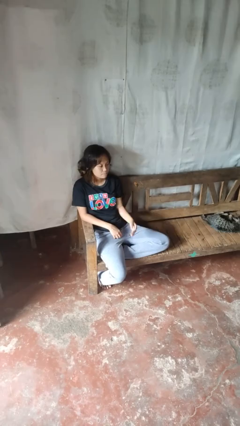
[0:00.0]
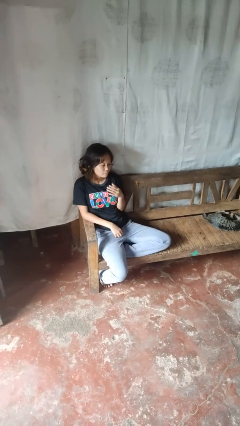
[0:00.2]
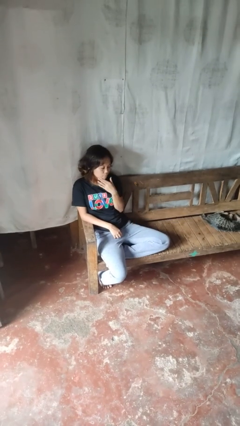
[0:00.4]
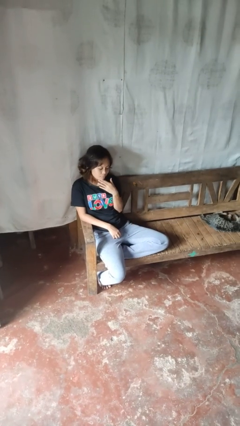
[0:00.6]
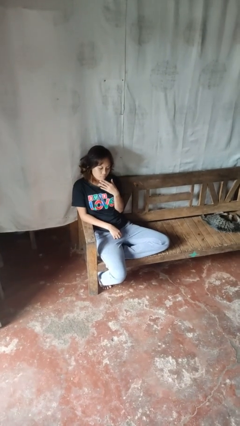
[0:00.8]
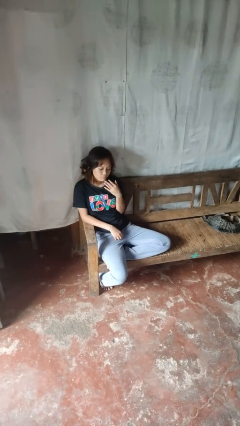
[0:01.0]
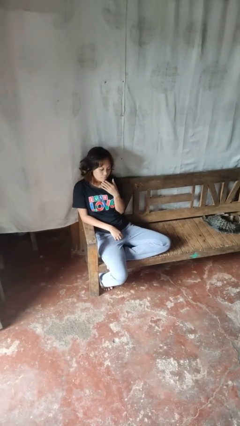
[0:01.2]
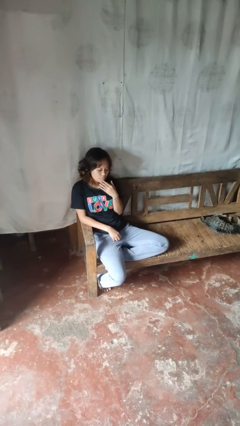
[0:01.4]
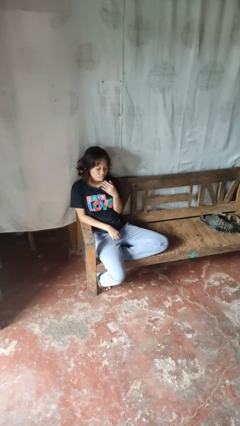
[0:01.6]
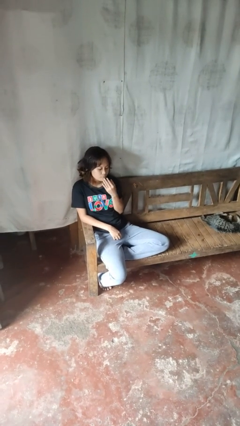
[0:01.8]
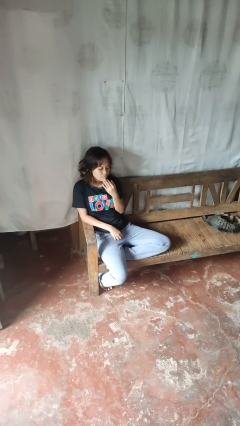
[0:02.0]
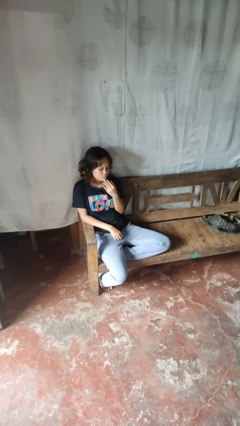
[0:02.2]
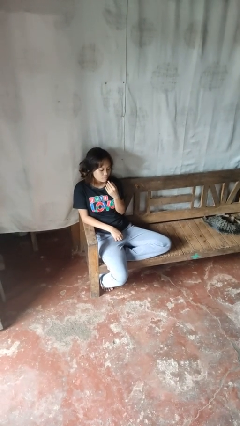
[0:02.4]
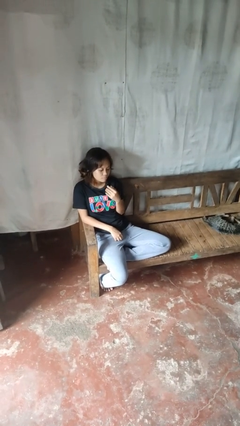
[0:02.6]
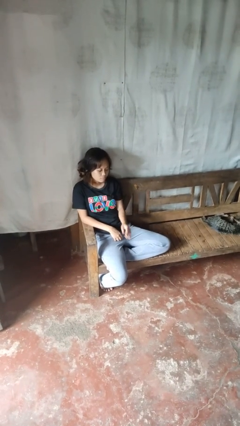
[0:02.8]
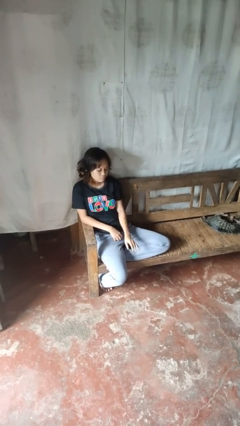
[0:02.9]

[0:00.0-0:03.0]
person strokes chin

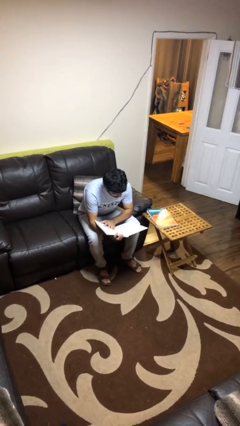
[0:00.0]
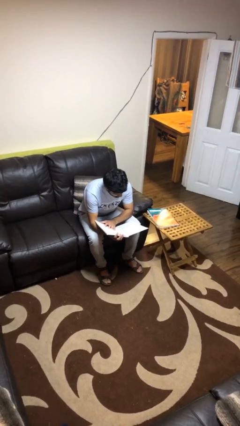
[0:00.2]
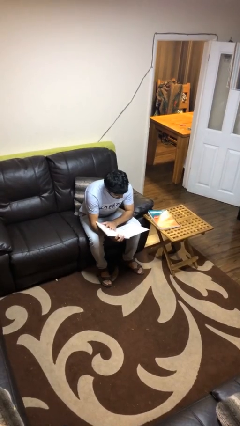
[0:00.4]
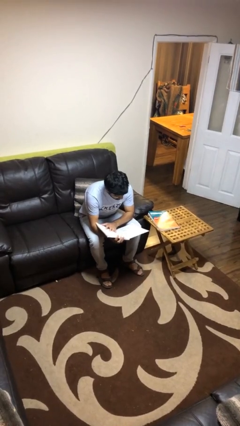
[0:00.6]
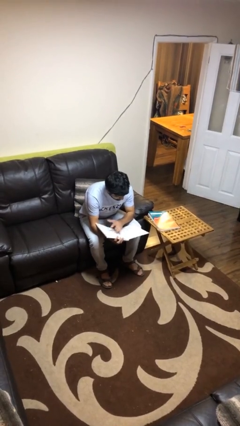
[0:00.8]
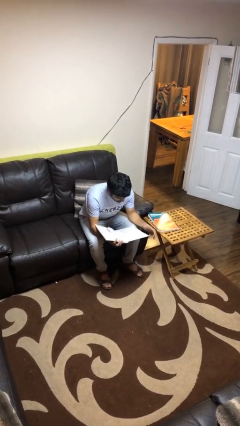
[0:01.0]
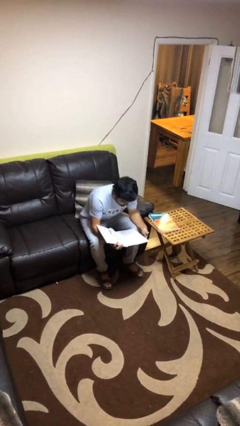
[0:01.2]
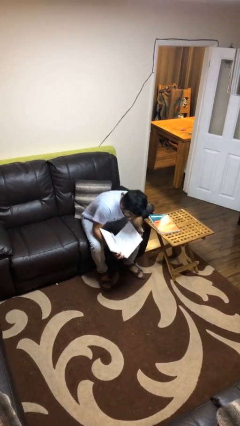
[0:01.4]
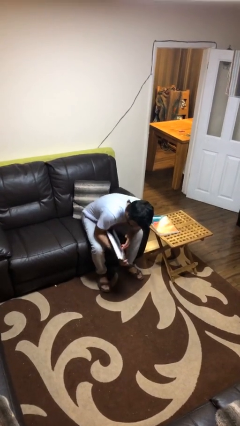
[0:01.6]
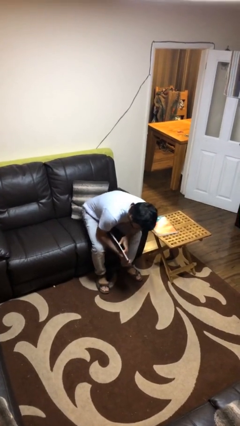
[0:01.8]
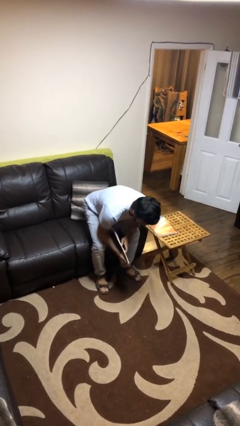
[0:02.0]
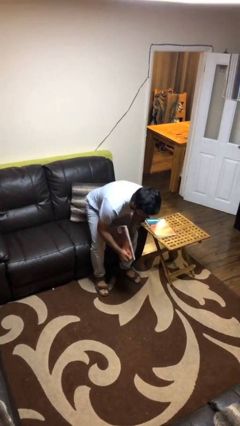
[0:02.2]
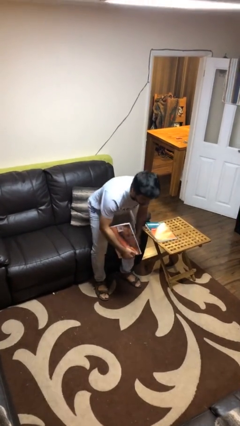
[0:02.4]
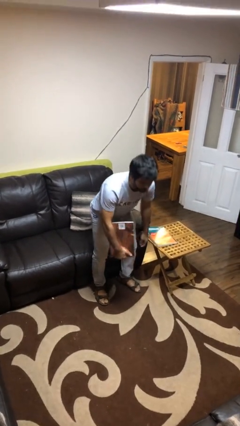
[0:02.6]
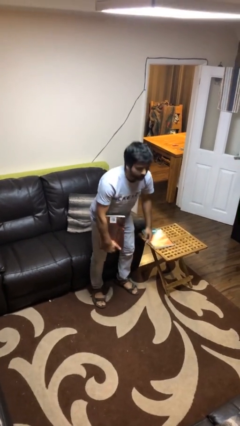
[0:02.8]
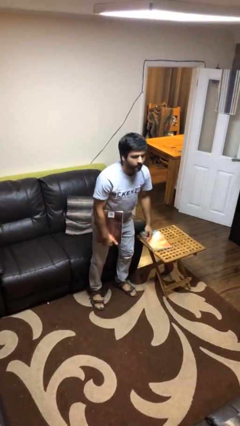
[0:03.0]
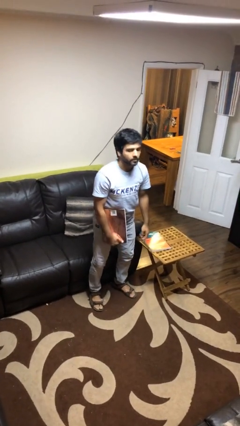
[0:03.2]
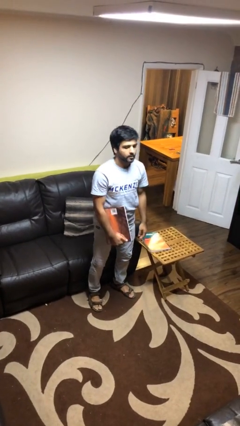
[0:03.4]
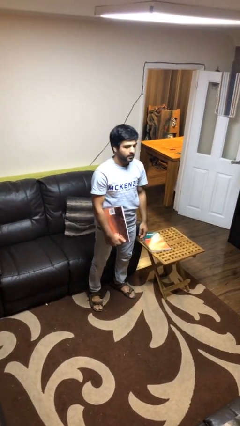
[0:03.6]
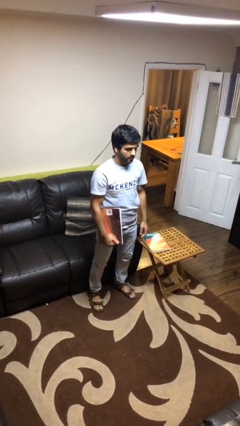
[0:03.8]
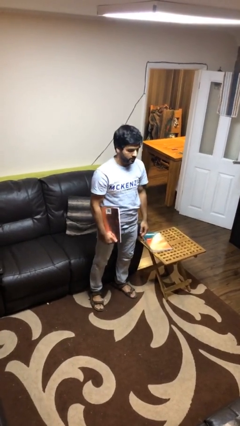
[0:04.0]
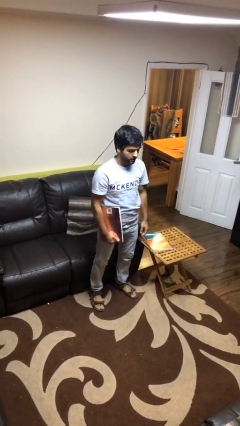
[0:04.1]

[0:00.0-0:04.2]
person stands up

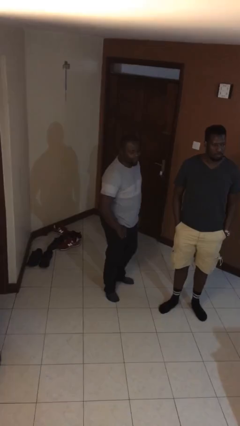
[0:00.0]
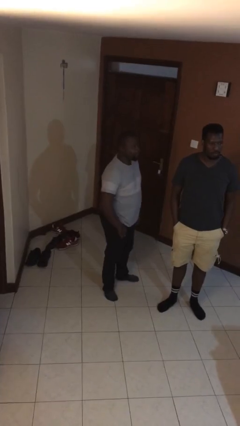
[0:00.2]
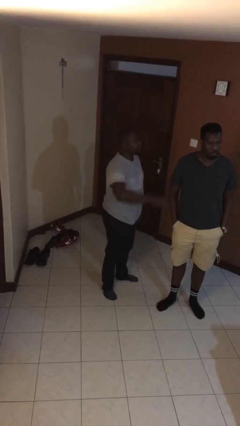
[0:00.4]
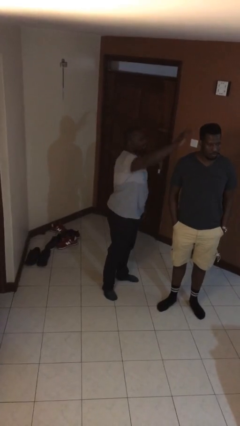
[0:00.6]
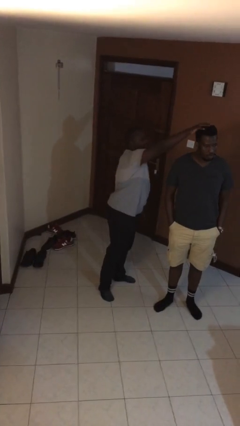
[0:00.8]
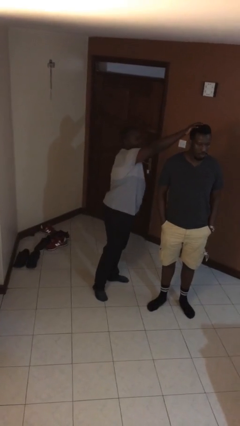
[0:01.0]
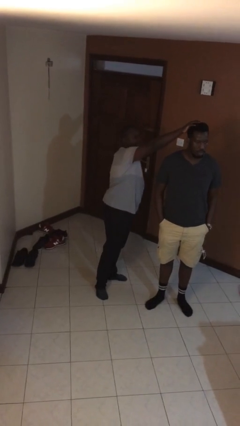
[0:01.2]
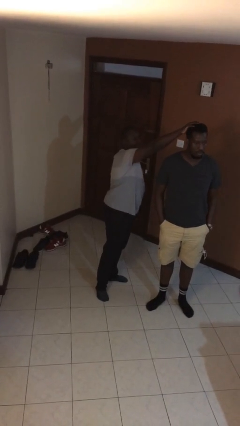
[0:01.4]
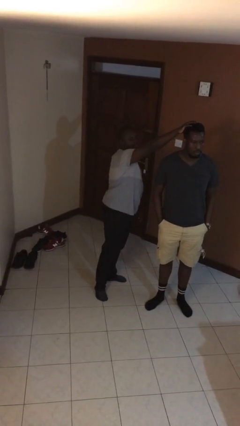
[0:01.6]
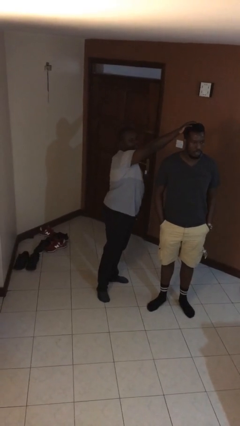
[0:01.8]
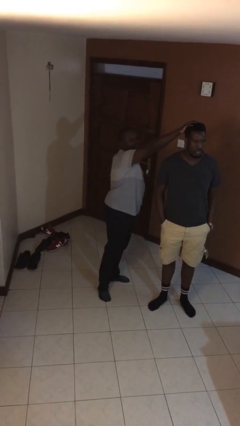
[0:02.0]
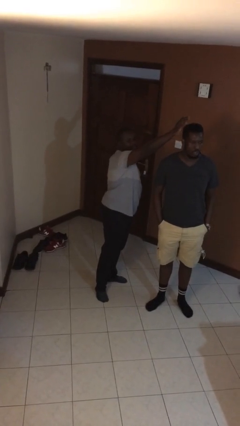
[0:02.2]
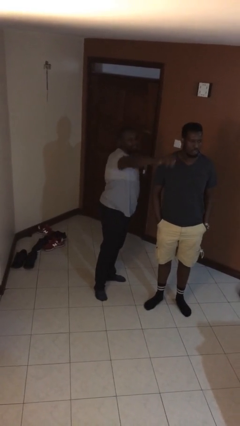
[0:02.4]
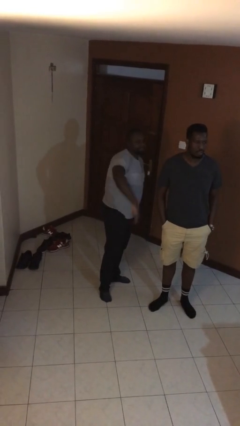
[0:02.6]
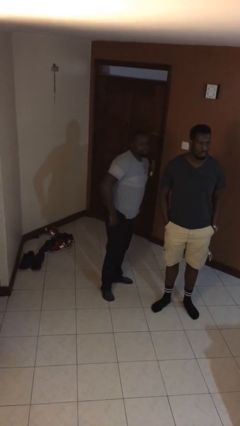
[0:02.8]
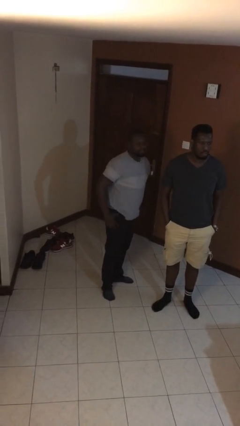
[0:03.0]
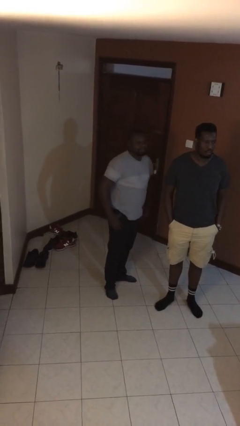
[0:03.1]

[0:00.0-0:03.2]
person grabs person by hair

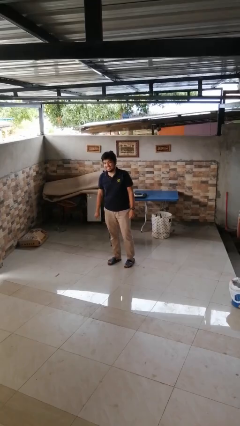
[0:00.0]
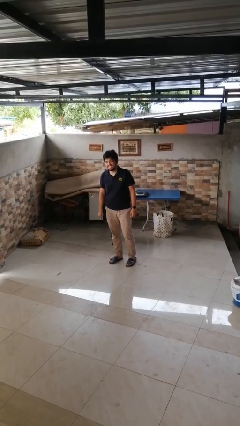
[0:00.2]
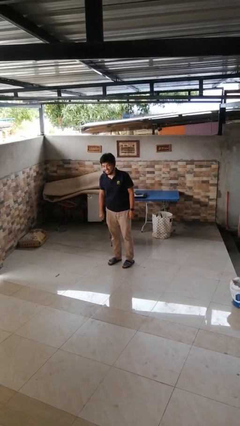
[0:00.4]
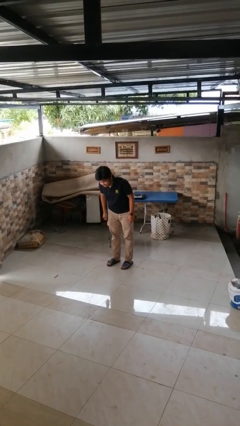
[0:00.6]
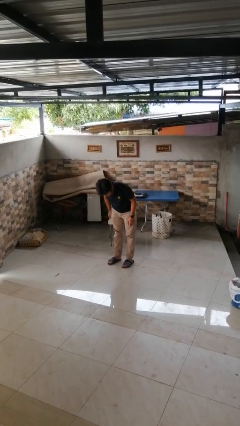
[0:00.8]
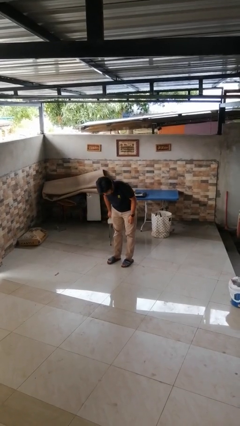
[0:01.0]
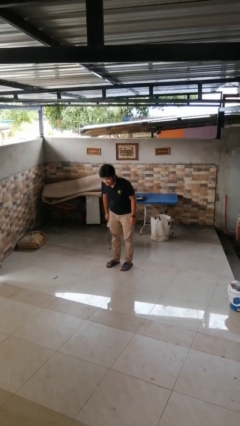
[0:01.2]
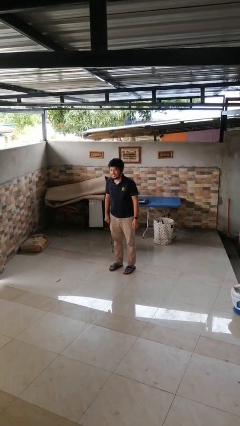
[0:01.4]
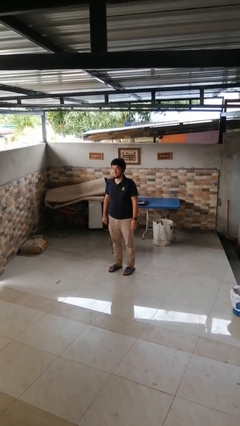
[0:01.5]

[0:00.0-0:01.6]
person bows

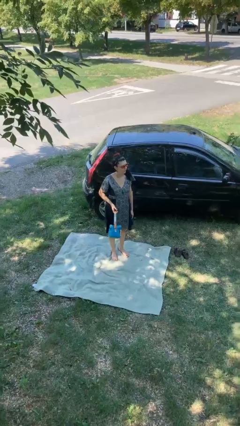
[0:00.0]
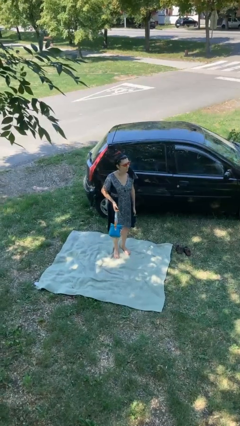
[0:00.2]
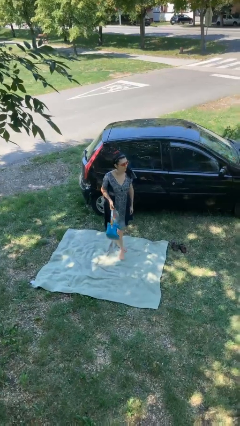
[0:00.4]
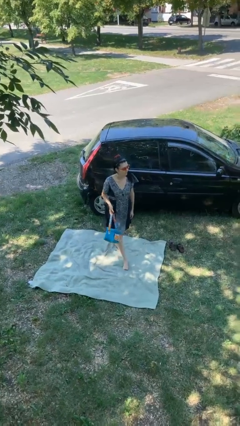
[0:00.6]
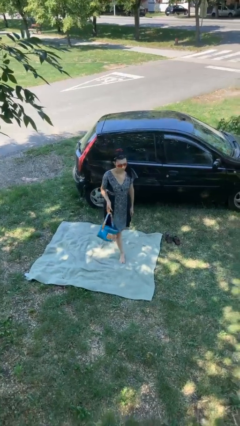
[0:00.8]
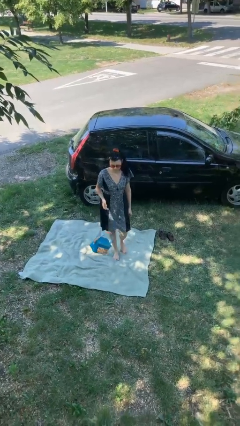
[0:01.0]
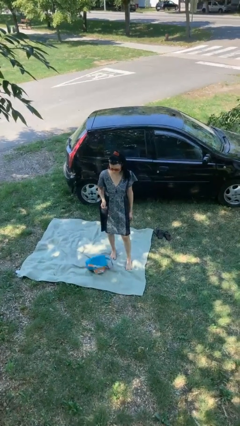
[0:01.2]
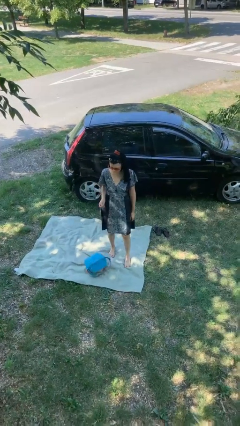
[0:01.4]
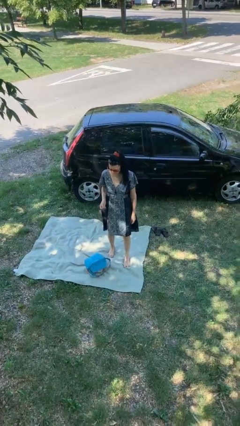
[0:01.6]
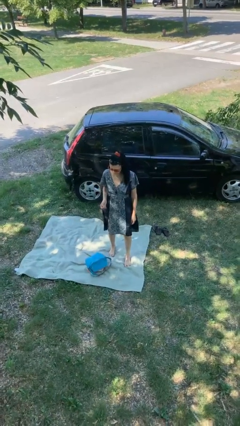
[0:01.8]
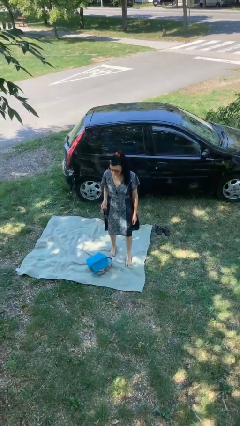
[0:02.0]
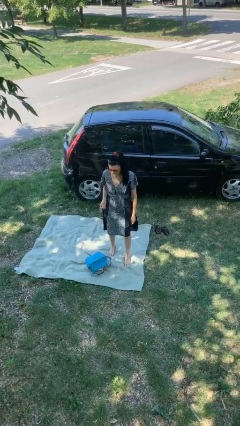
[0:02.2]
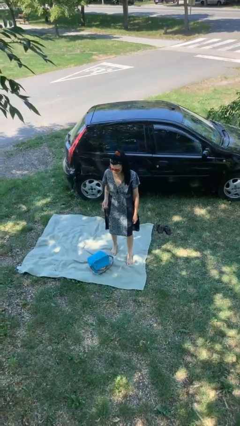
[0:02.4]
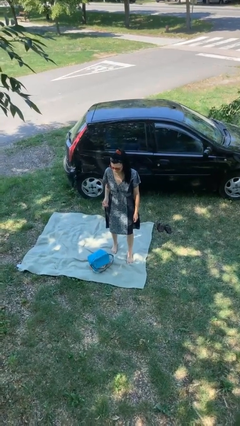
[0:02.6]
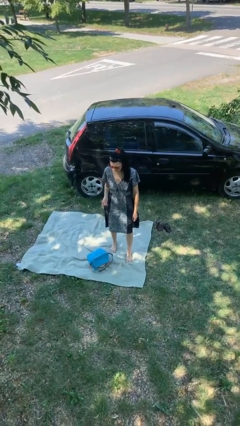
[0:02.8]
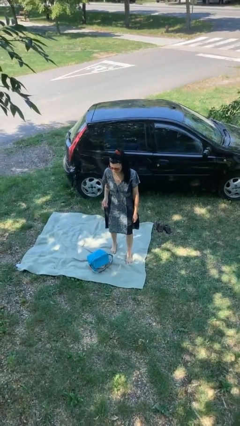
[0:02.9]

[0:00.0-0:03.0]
person drops object

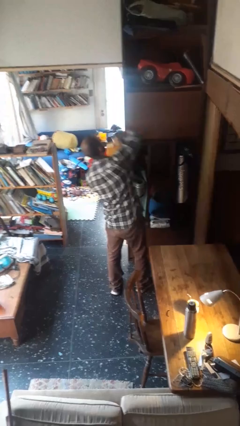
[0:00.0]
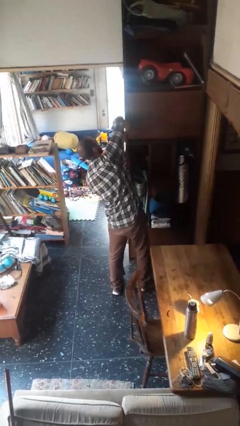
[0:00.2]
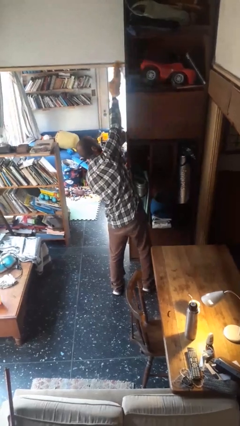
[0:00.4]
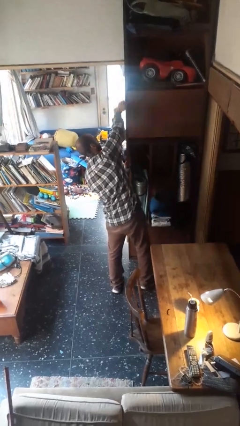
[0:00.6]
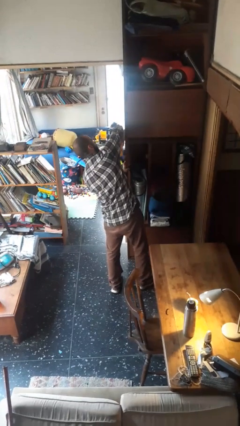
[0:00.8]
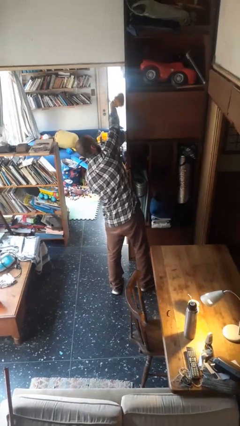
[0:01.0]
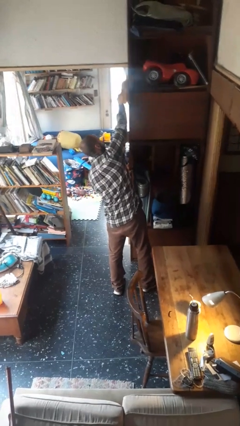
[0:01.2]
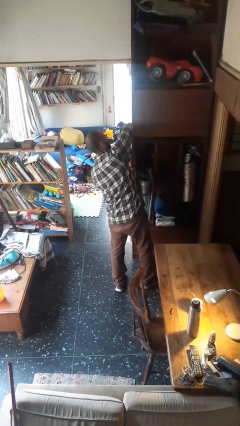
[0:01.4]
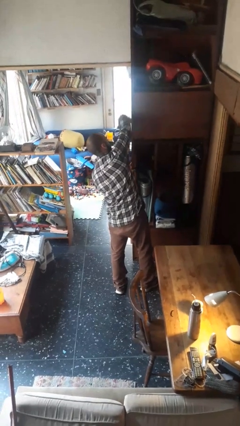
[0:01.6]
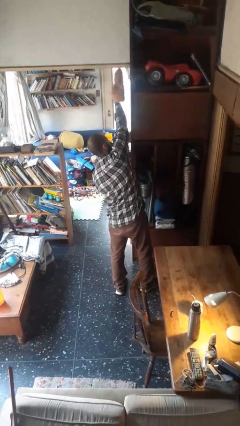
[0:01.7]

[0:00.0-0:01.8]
person dusts furniture

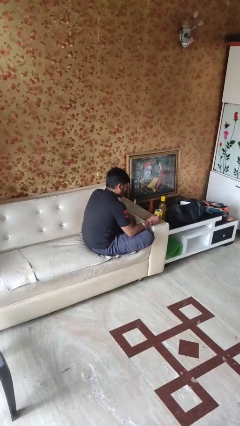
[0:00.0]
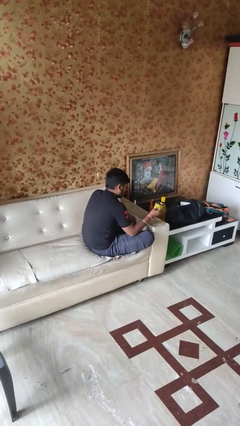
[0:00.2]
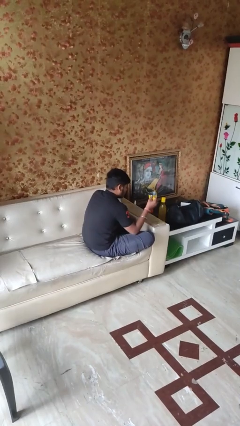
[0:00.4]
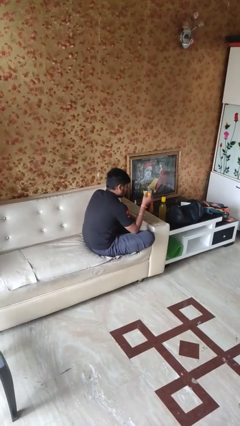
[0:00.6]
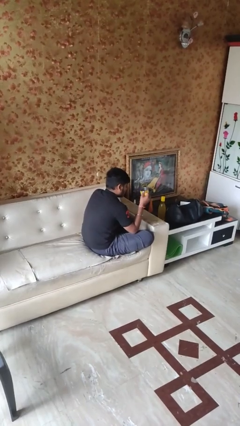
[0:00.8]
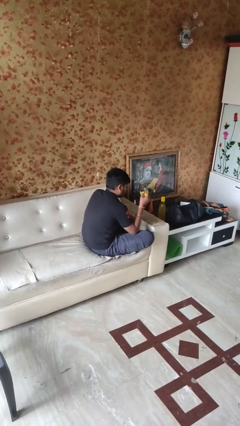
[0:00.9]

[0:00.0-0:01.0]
person picks up object from table
